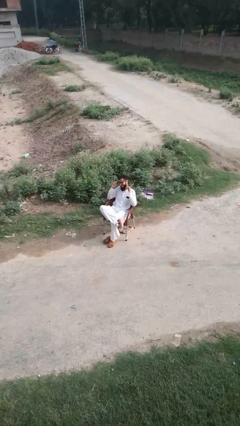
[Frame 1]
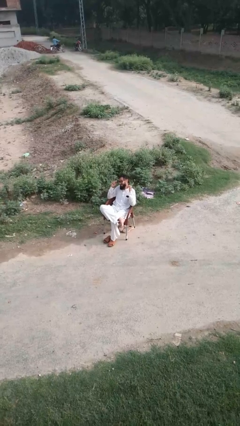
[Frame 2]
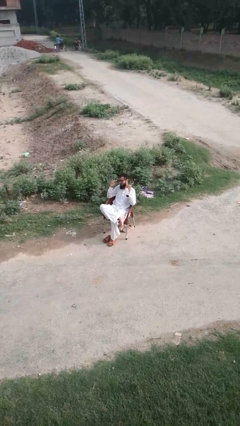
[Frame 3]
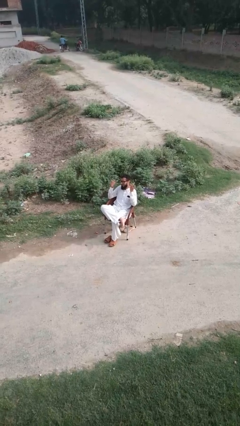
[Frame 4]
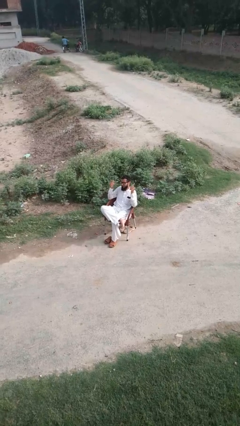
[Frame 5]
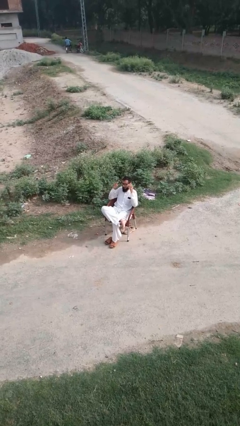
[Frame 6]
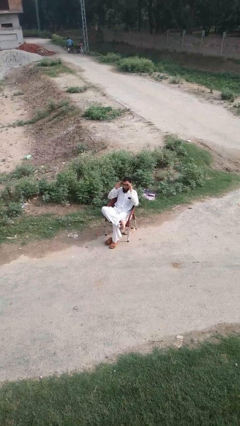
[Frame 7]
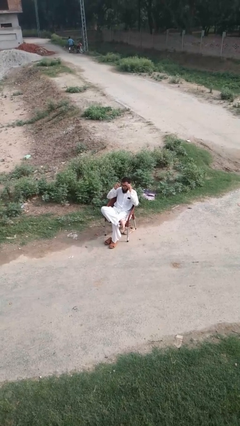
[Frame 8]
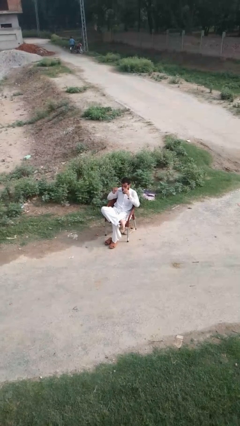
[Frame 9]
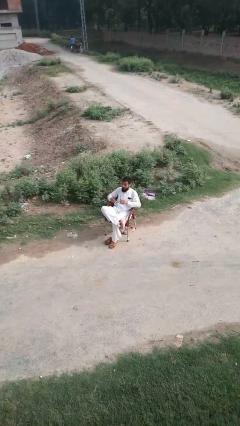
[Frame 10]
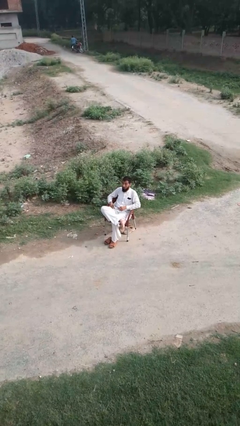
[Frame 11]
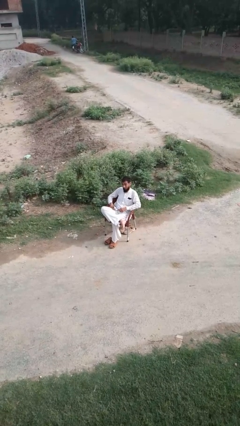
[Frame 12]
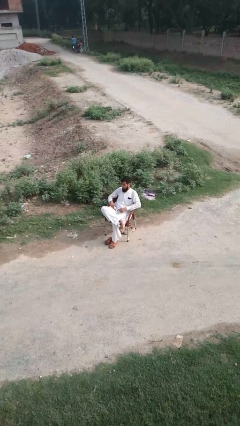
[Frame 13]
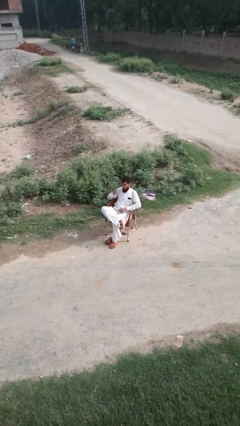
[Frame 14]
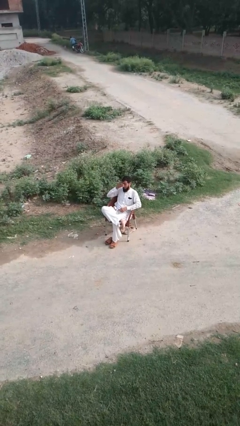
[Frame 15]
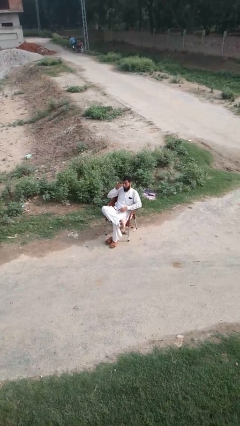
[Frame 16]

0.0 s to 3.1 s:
person takes off glasses

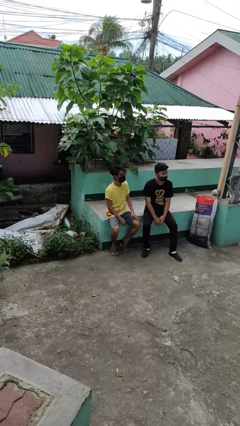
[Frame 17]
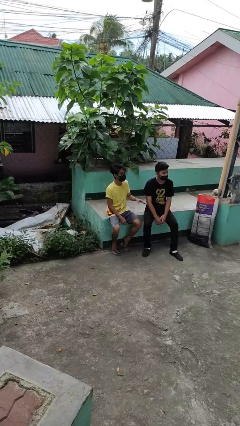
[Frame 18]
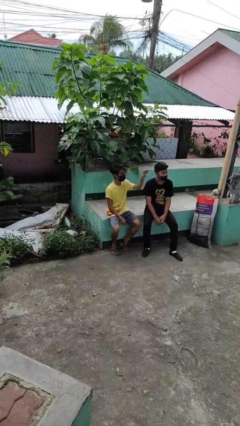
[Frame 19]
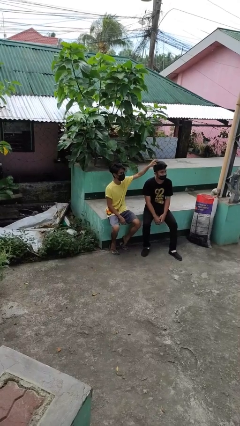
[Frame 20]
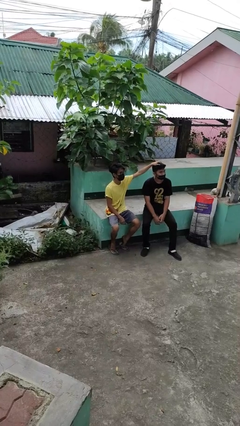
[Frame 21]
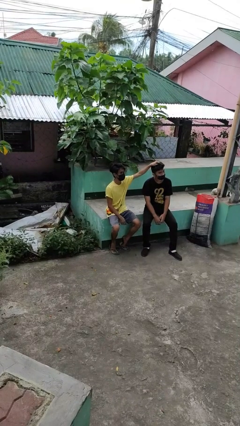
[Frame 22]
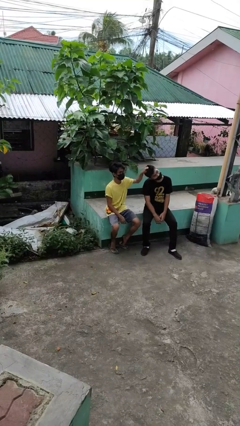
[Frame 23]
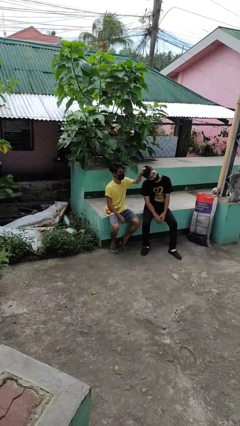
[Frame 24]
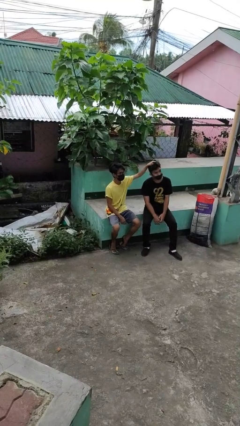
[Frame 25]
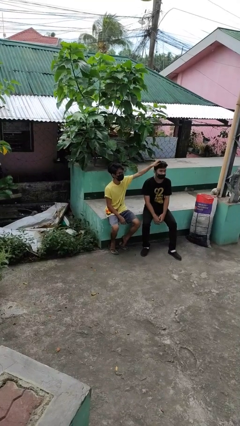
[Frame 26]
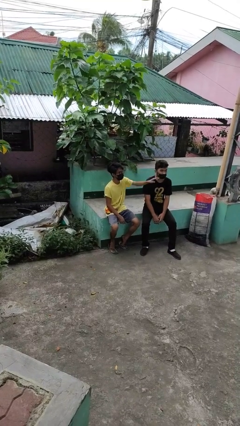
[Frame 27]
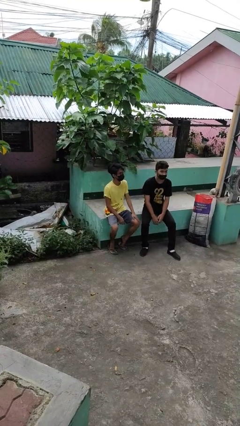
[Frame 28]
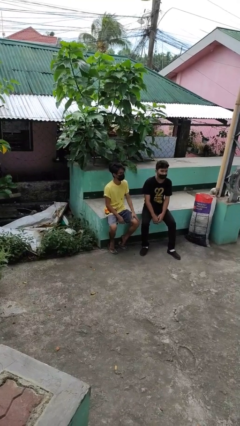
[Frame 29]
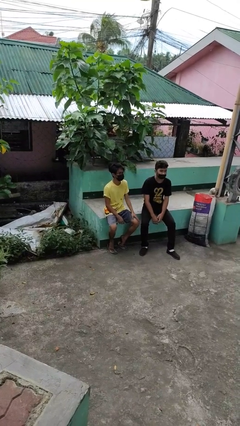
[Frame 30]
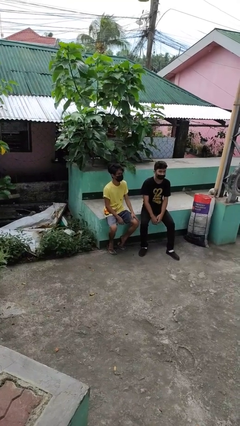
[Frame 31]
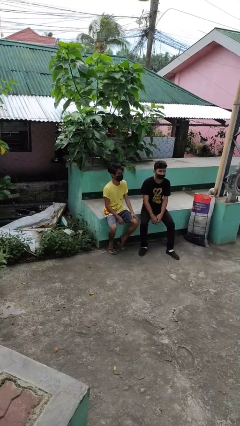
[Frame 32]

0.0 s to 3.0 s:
person grabs person by hair

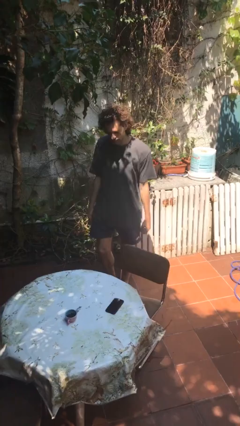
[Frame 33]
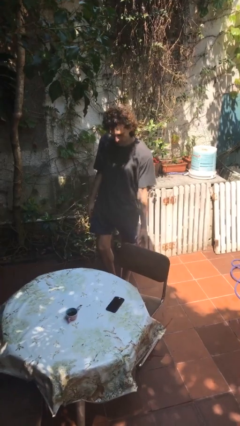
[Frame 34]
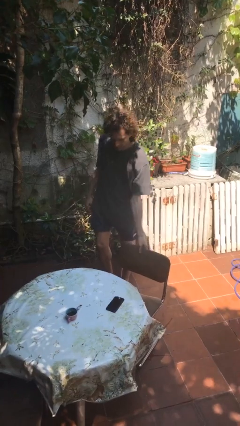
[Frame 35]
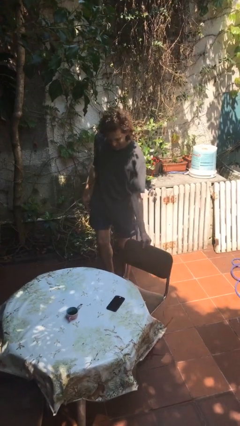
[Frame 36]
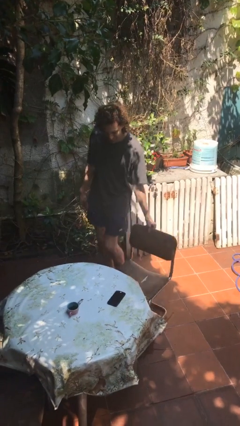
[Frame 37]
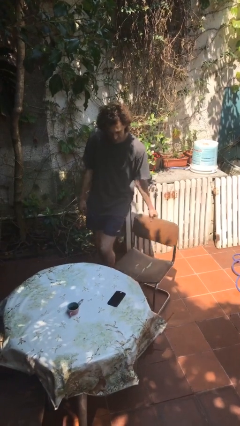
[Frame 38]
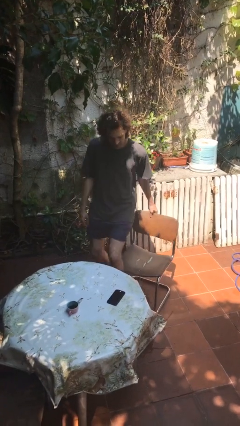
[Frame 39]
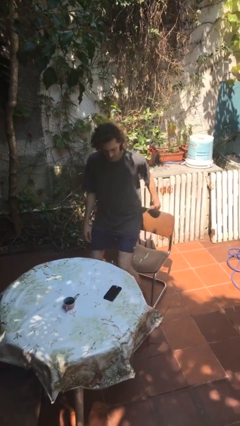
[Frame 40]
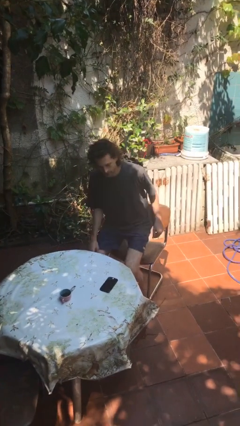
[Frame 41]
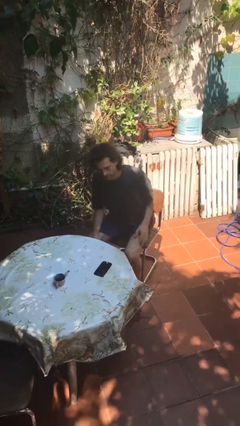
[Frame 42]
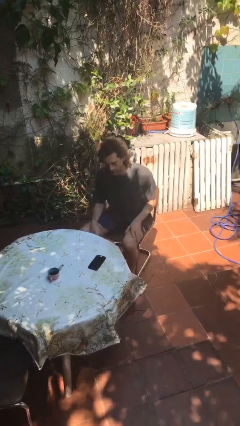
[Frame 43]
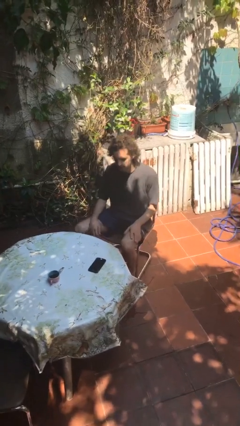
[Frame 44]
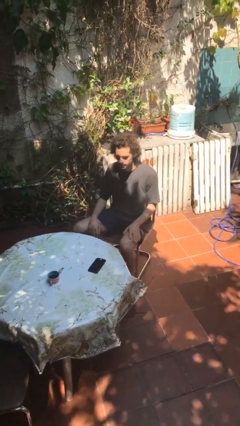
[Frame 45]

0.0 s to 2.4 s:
person sits down

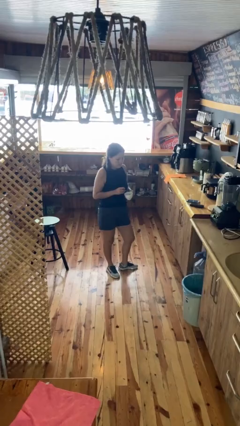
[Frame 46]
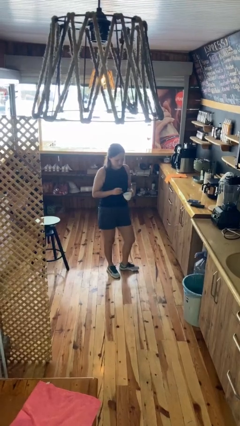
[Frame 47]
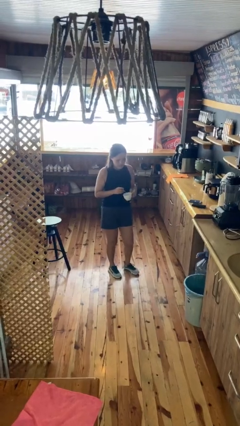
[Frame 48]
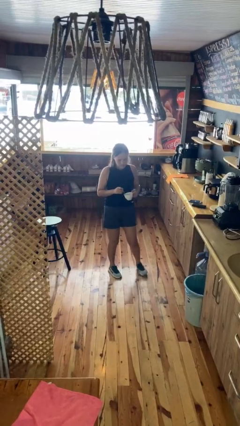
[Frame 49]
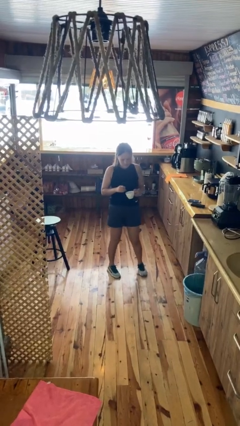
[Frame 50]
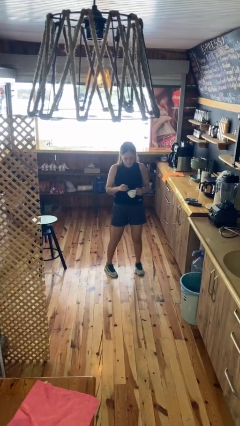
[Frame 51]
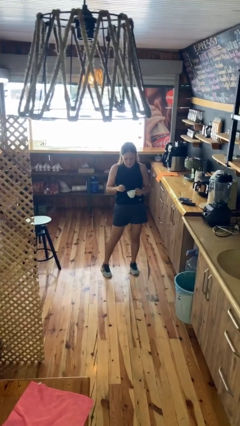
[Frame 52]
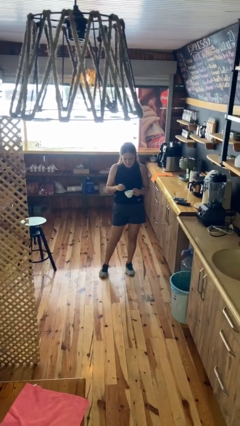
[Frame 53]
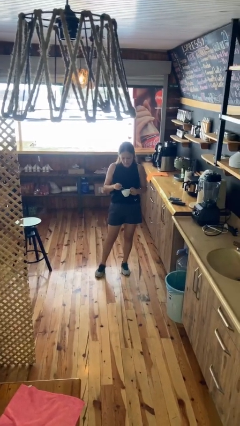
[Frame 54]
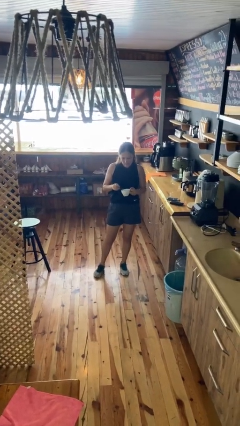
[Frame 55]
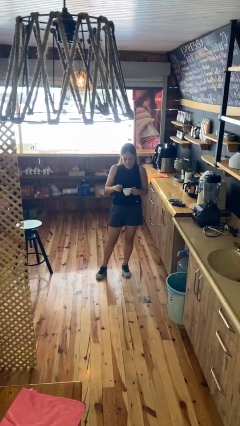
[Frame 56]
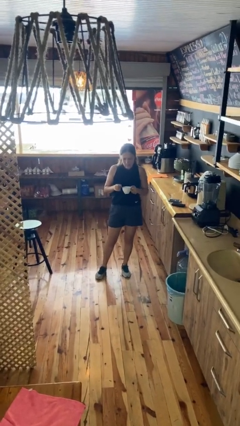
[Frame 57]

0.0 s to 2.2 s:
person stirs mug

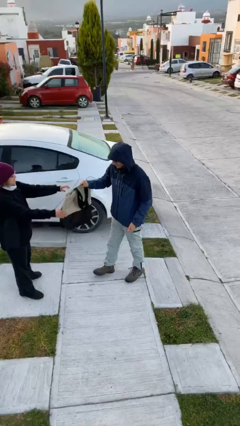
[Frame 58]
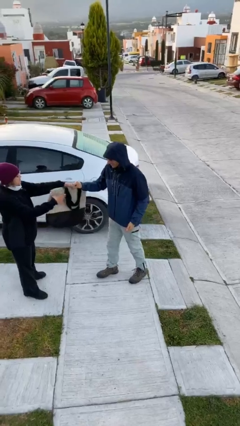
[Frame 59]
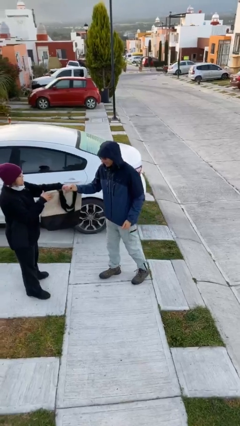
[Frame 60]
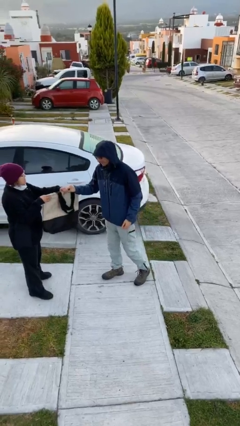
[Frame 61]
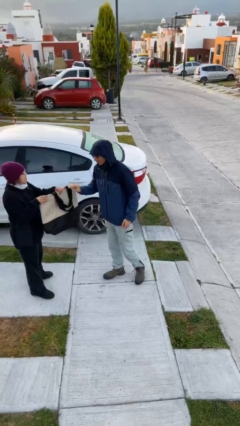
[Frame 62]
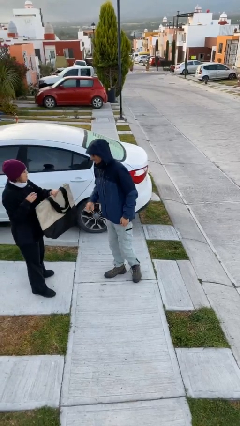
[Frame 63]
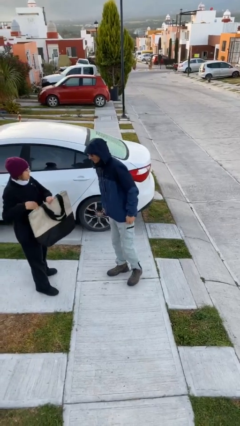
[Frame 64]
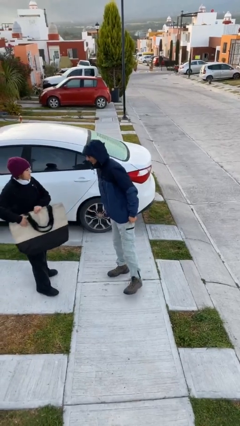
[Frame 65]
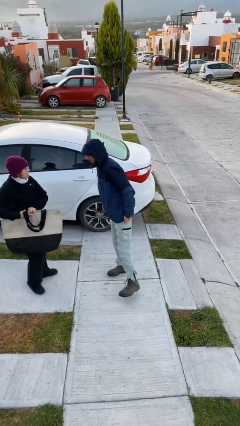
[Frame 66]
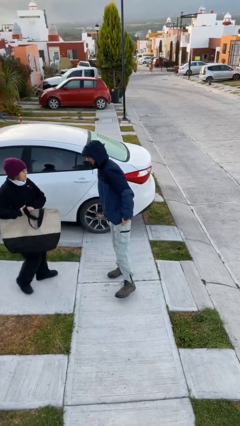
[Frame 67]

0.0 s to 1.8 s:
person transfers object to person

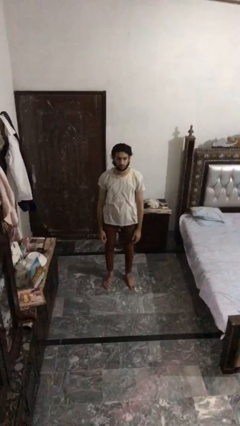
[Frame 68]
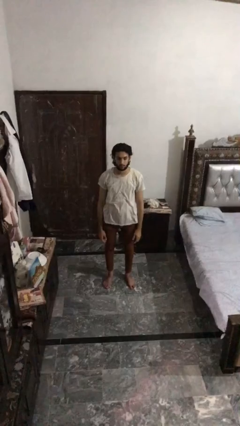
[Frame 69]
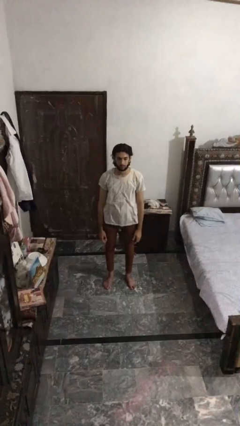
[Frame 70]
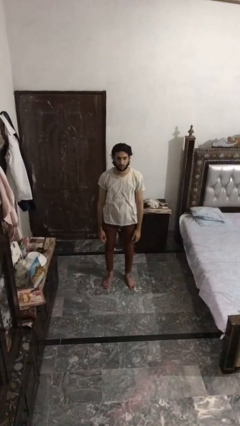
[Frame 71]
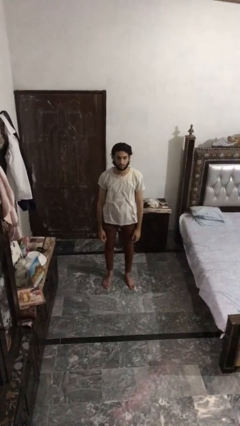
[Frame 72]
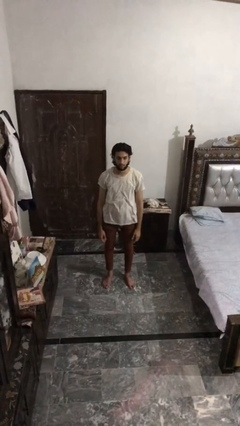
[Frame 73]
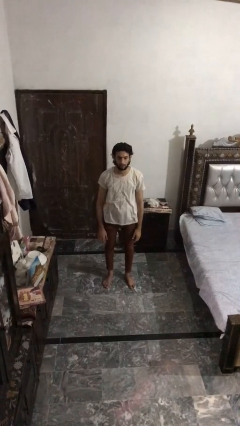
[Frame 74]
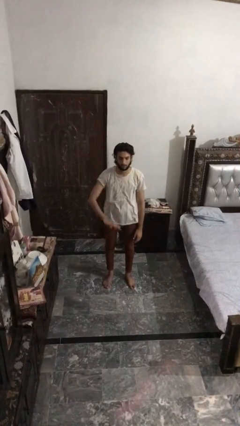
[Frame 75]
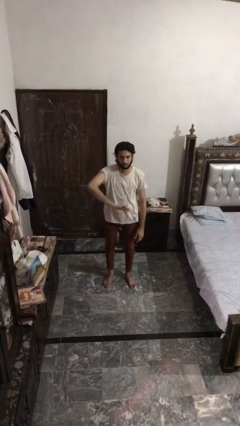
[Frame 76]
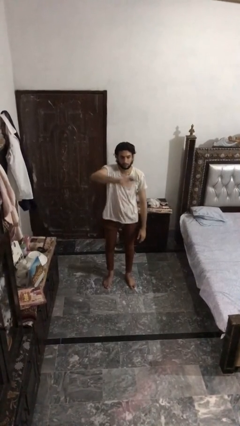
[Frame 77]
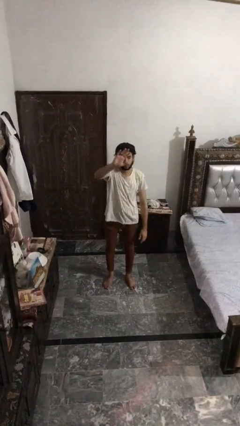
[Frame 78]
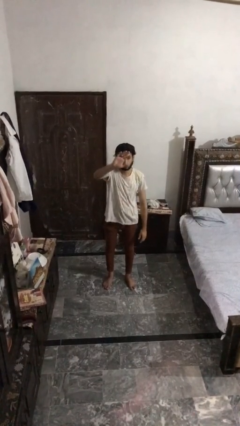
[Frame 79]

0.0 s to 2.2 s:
person gestures swipe up

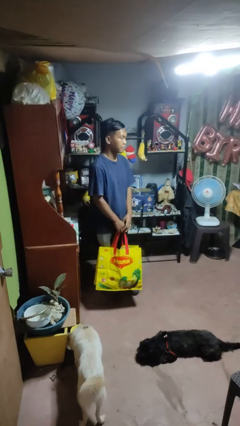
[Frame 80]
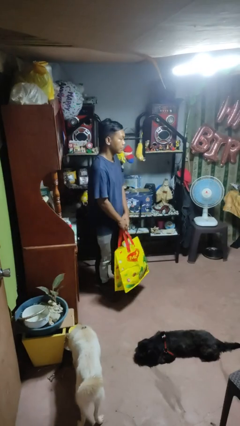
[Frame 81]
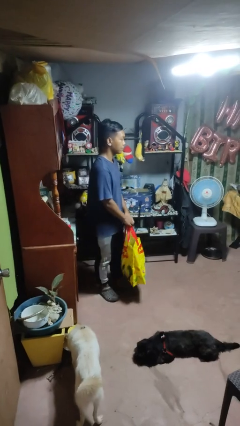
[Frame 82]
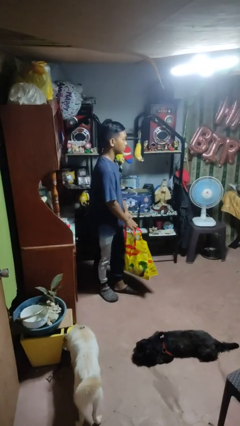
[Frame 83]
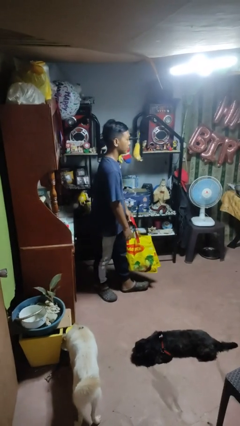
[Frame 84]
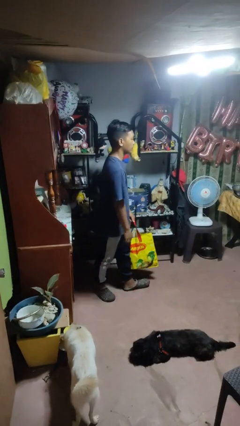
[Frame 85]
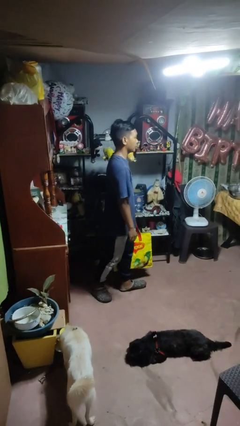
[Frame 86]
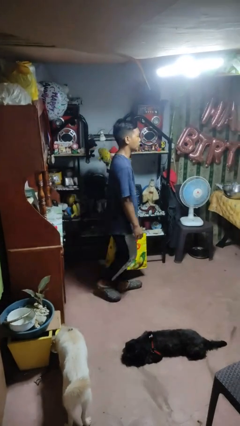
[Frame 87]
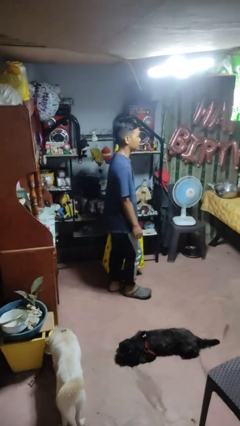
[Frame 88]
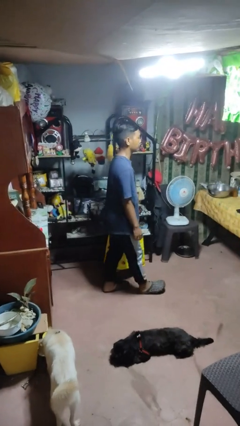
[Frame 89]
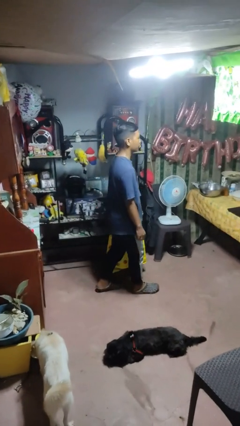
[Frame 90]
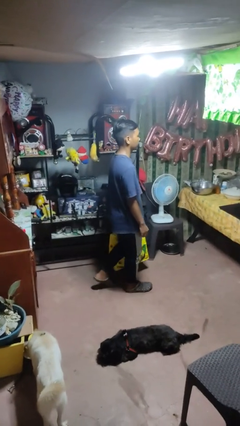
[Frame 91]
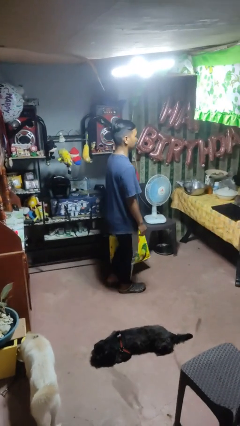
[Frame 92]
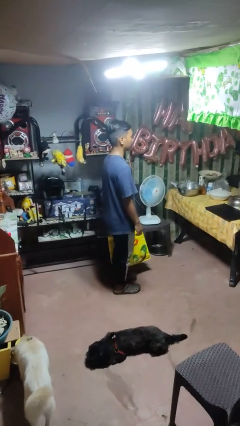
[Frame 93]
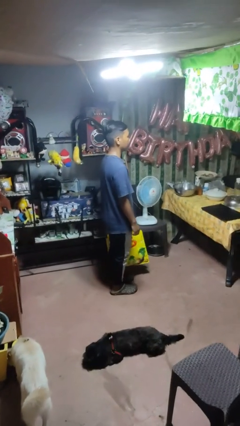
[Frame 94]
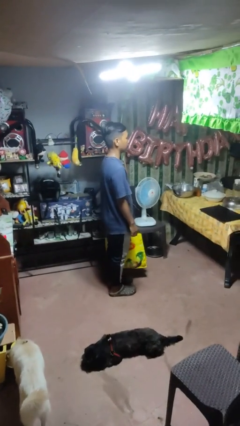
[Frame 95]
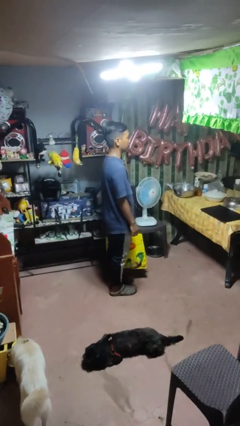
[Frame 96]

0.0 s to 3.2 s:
person carries groceries
